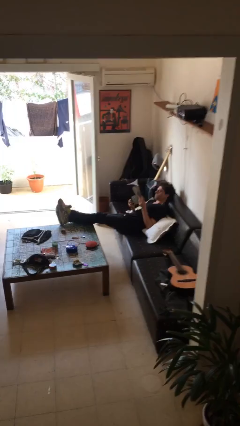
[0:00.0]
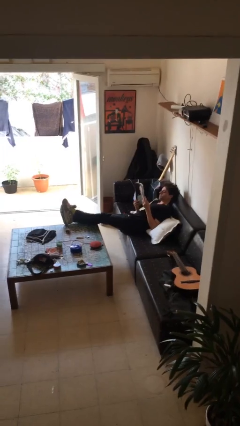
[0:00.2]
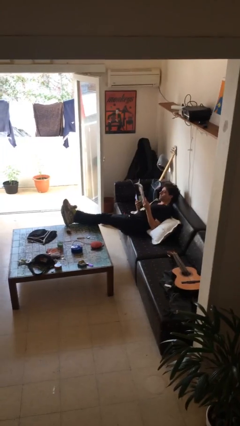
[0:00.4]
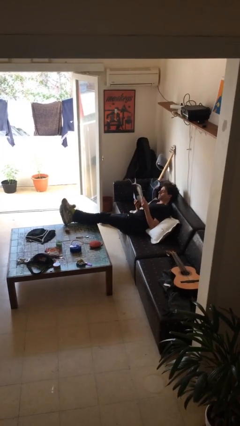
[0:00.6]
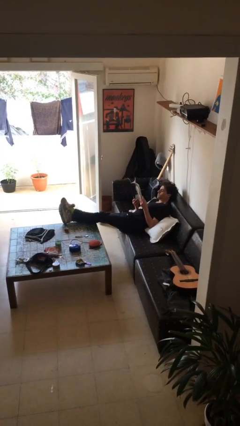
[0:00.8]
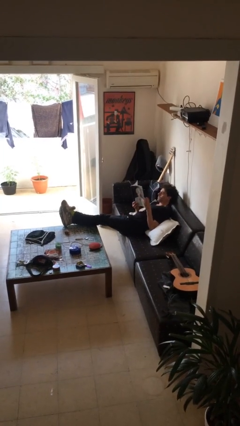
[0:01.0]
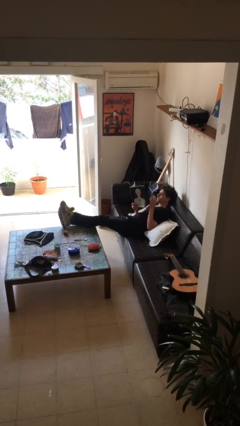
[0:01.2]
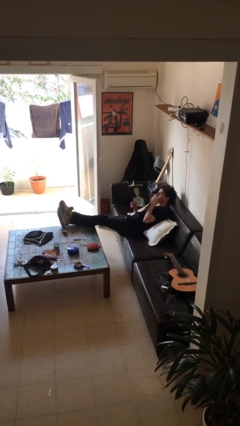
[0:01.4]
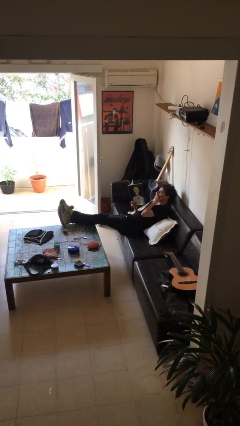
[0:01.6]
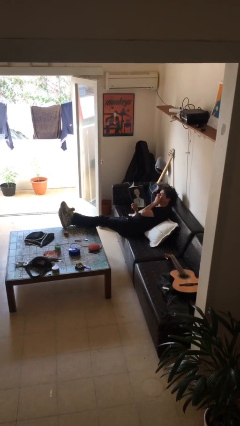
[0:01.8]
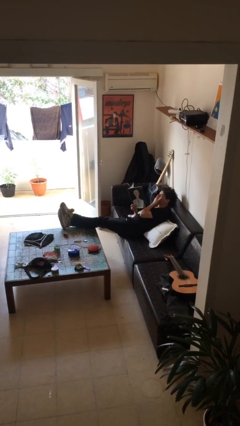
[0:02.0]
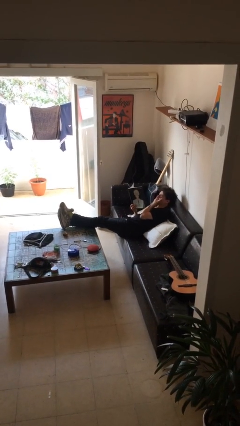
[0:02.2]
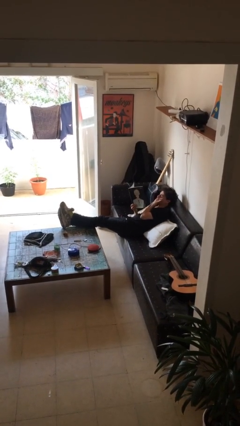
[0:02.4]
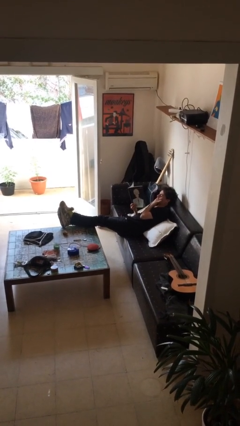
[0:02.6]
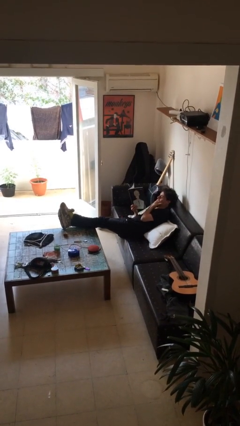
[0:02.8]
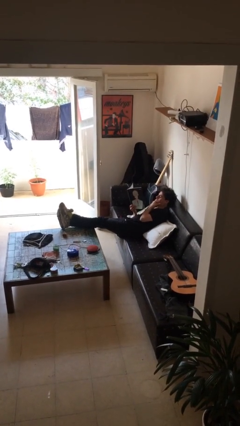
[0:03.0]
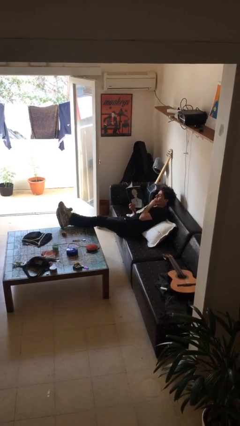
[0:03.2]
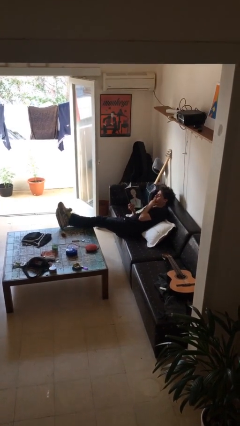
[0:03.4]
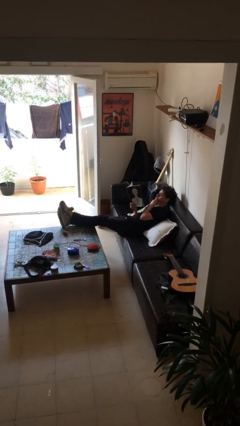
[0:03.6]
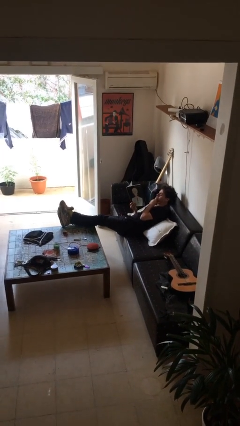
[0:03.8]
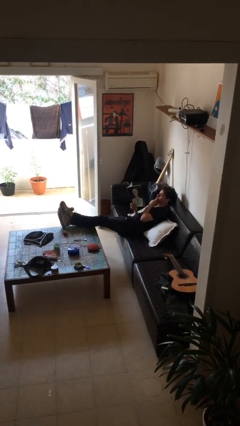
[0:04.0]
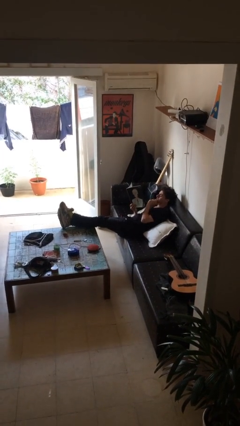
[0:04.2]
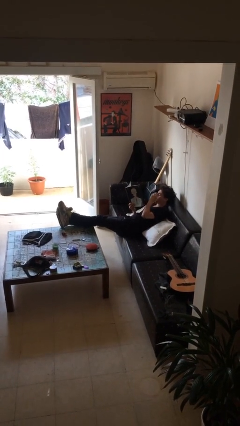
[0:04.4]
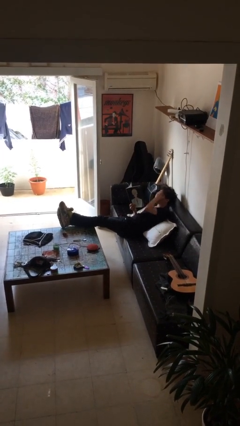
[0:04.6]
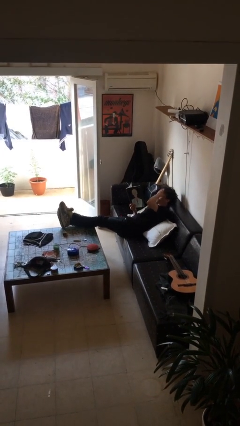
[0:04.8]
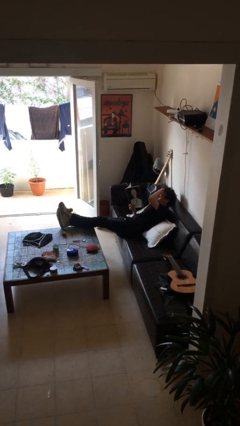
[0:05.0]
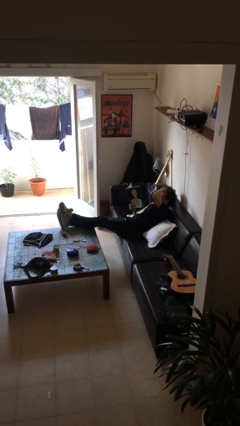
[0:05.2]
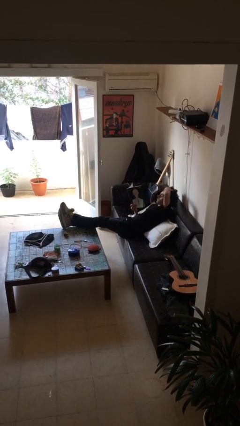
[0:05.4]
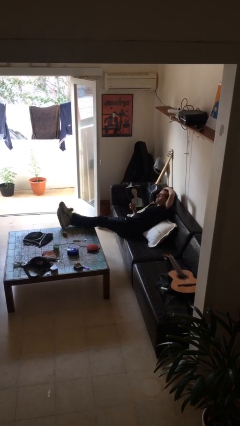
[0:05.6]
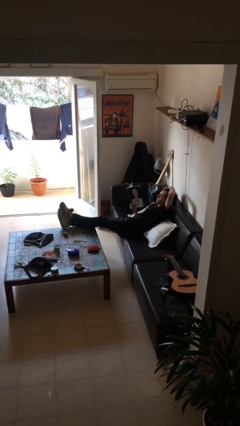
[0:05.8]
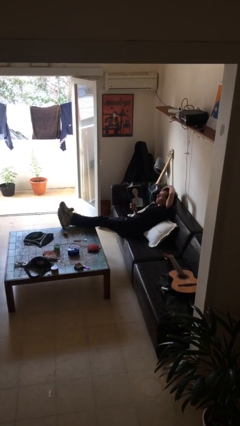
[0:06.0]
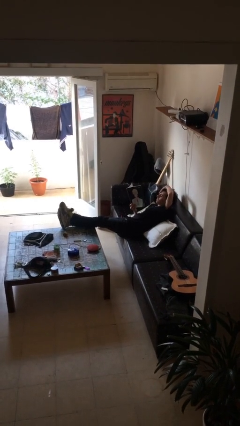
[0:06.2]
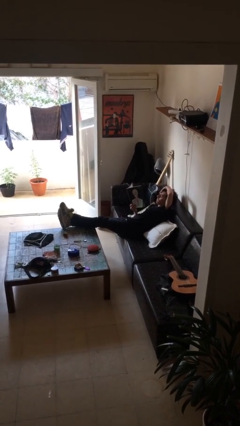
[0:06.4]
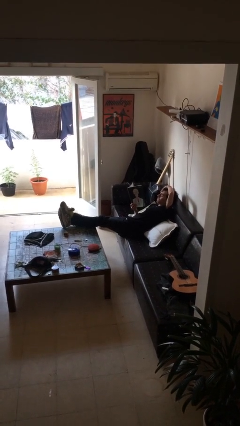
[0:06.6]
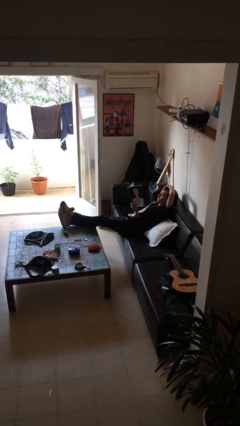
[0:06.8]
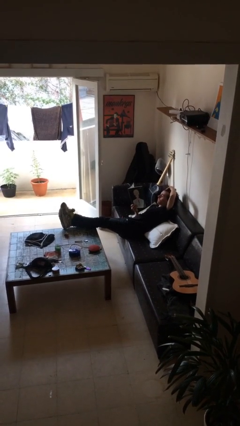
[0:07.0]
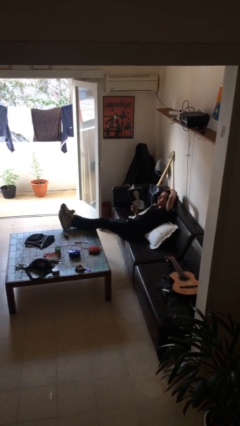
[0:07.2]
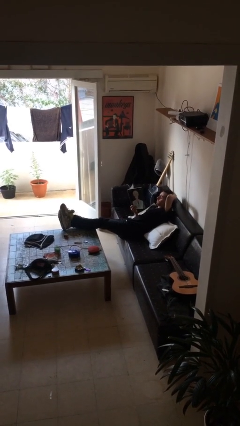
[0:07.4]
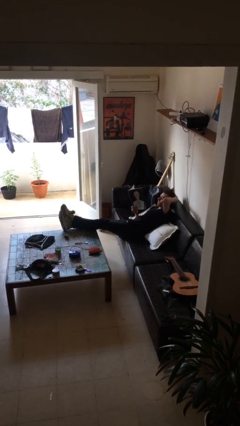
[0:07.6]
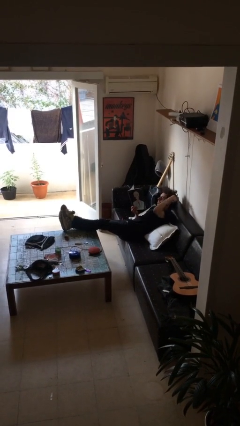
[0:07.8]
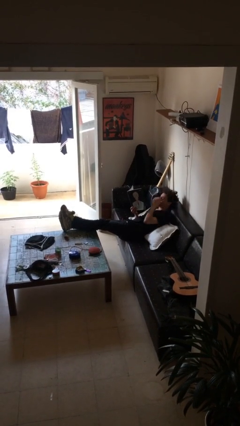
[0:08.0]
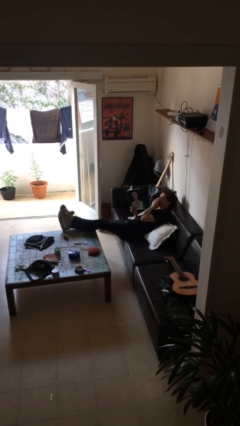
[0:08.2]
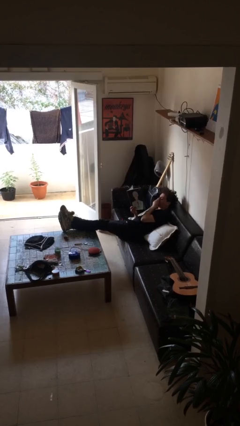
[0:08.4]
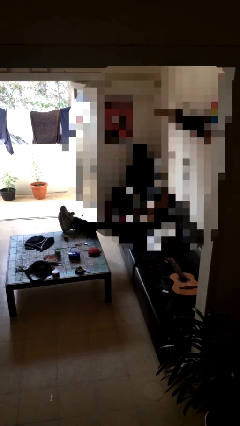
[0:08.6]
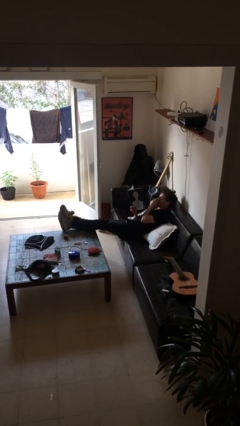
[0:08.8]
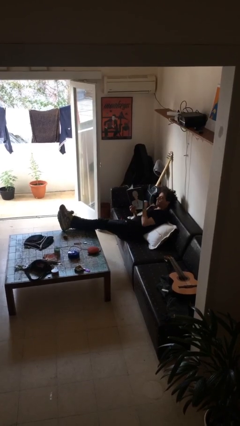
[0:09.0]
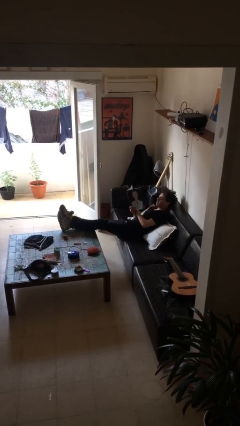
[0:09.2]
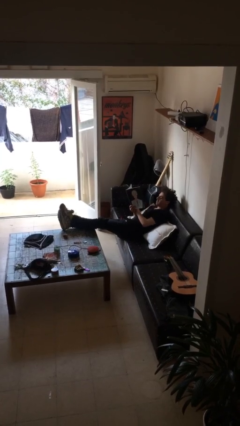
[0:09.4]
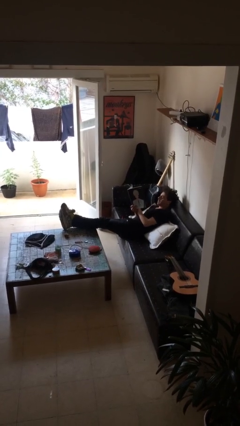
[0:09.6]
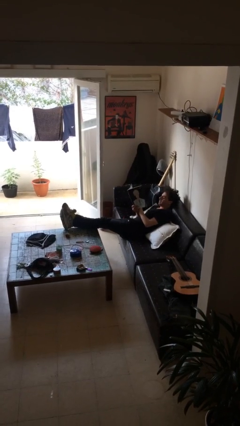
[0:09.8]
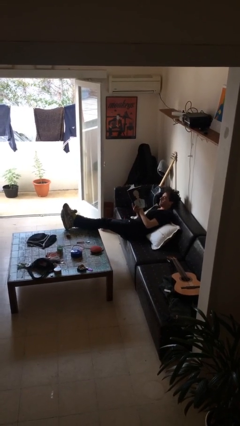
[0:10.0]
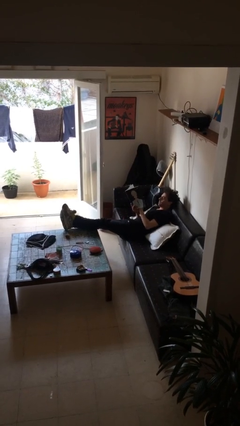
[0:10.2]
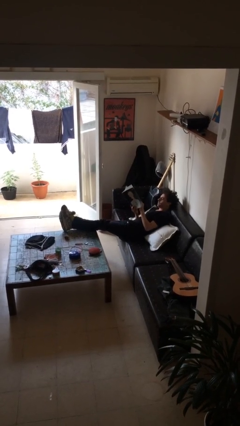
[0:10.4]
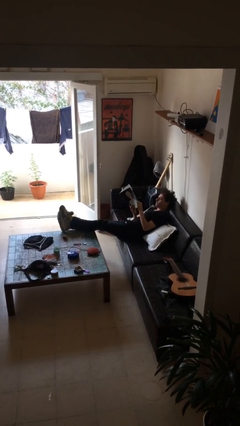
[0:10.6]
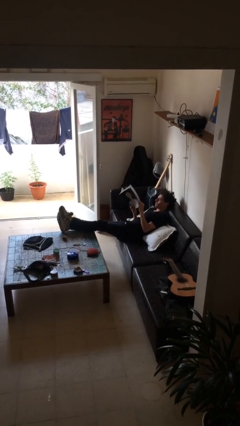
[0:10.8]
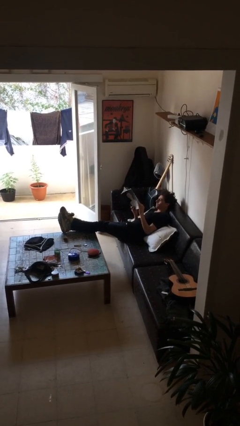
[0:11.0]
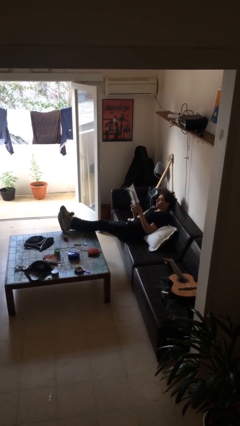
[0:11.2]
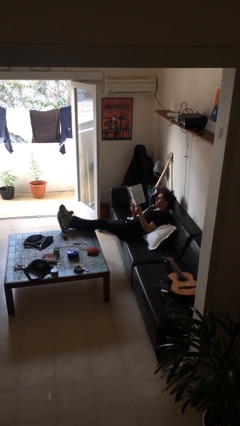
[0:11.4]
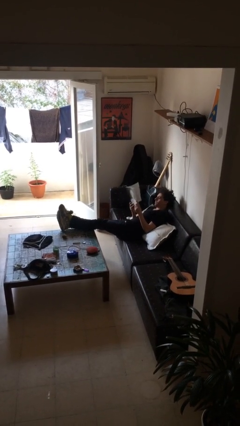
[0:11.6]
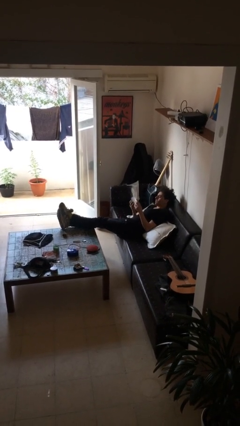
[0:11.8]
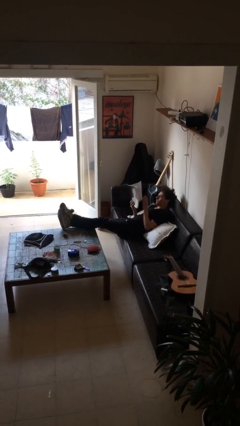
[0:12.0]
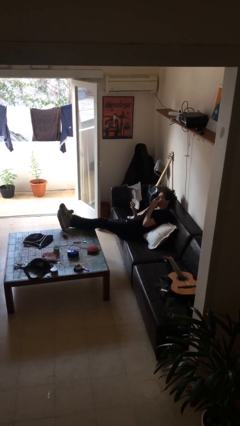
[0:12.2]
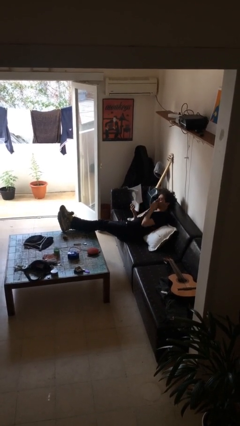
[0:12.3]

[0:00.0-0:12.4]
person reads document

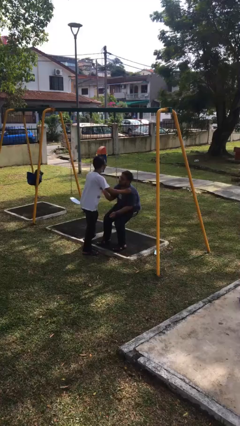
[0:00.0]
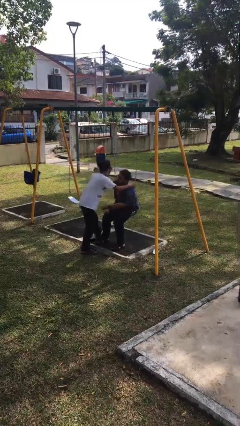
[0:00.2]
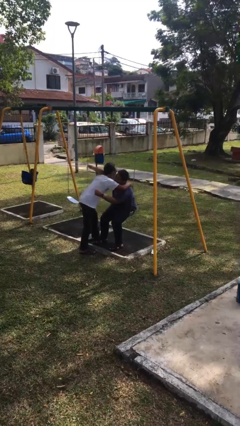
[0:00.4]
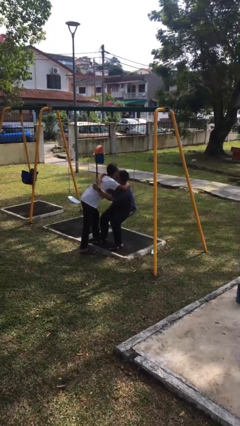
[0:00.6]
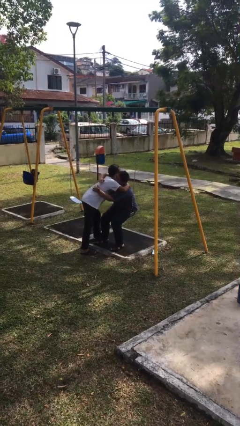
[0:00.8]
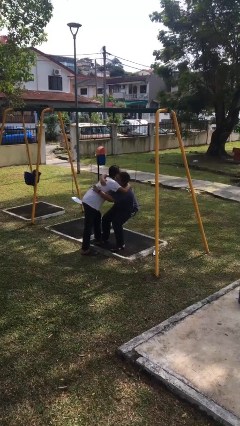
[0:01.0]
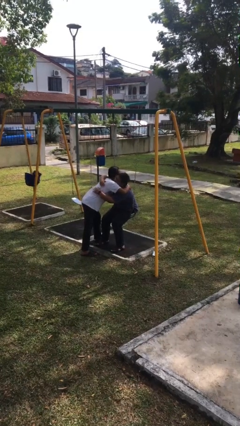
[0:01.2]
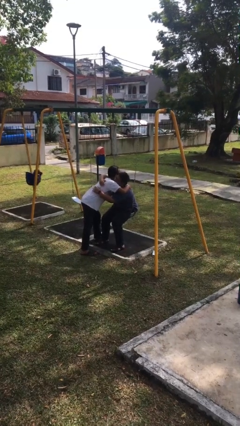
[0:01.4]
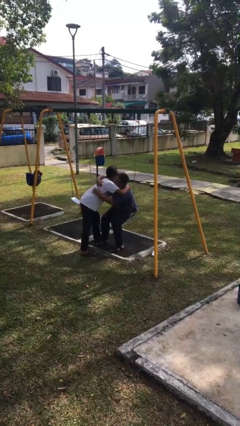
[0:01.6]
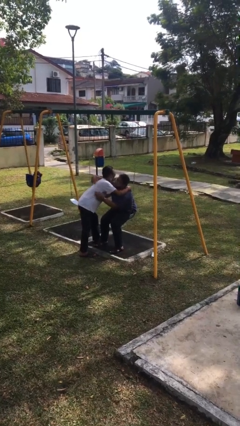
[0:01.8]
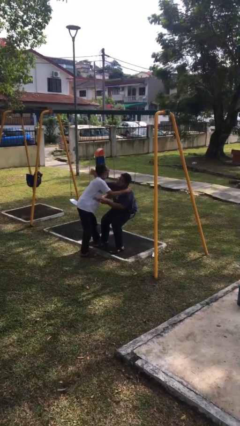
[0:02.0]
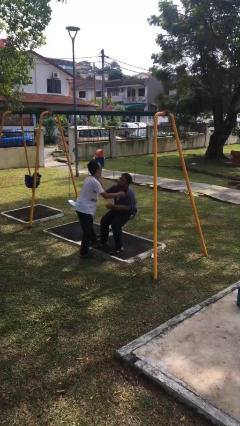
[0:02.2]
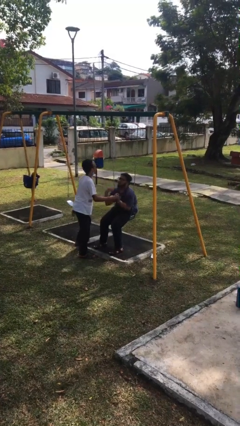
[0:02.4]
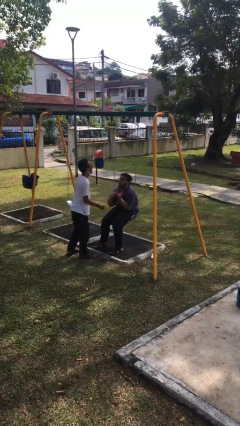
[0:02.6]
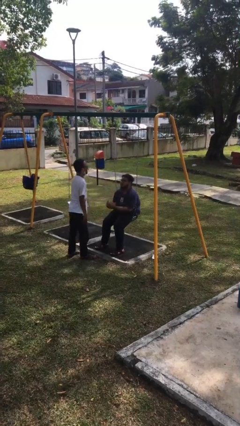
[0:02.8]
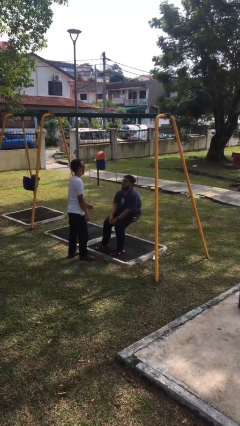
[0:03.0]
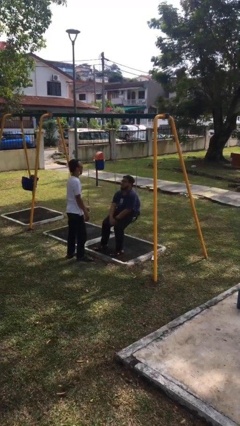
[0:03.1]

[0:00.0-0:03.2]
person embraces person

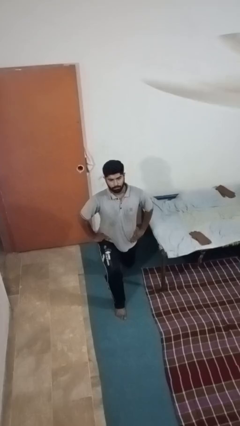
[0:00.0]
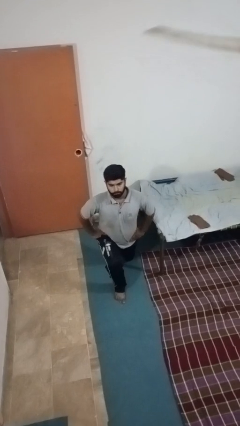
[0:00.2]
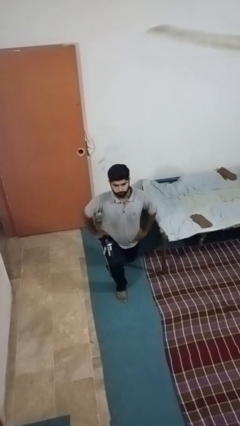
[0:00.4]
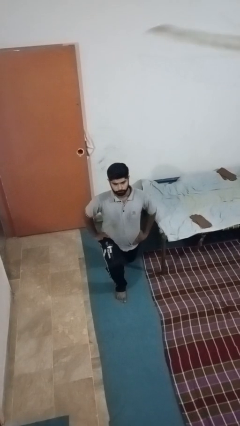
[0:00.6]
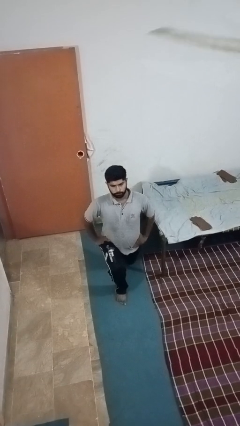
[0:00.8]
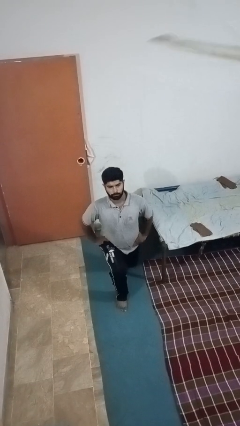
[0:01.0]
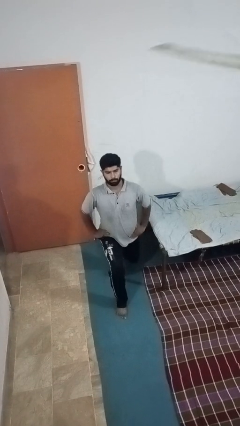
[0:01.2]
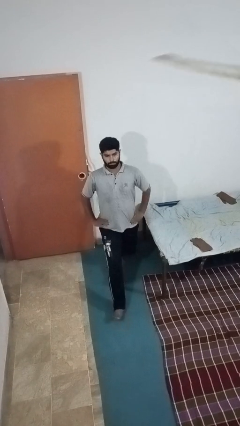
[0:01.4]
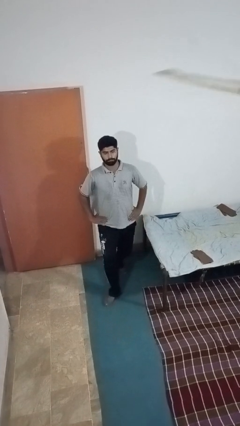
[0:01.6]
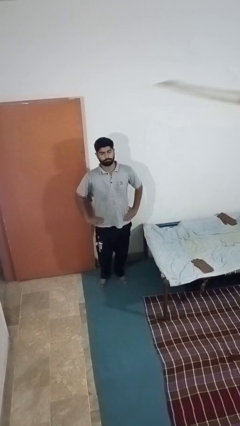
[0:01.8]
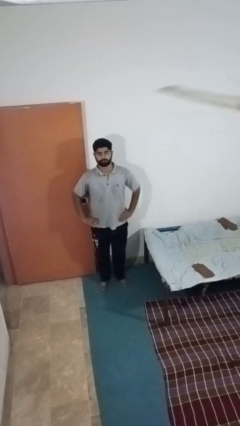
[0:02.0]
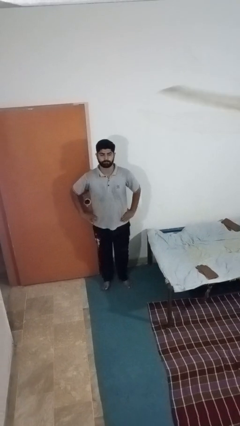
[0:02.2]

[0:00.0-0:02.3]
person exercises with lunges

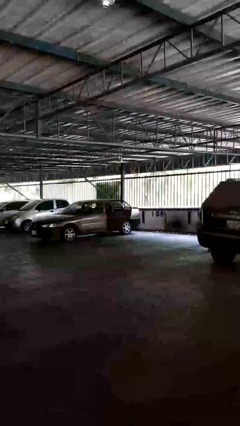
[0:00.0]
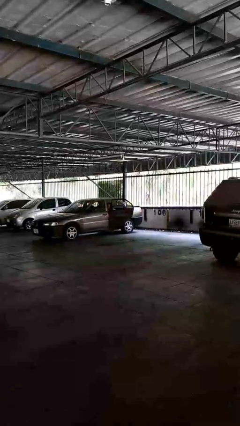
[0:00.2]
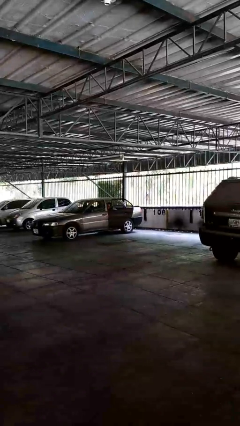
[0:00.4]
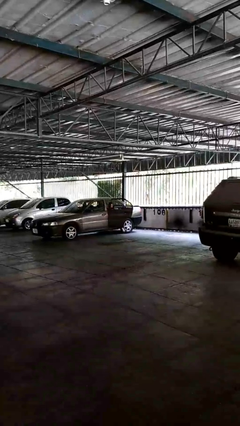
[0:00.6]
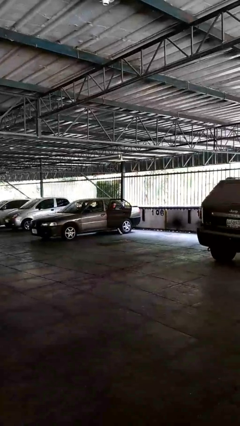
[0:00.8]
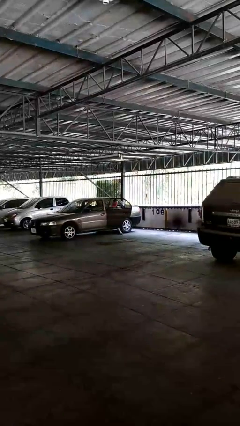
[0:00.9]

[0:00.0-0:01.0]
person enters car
